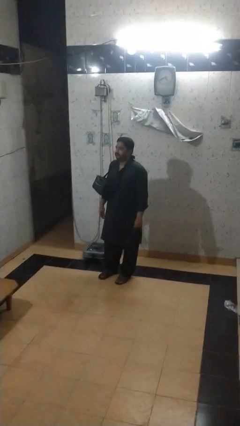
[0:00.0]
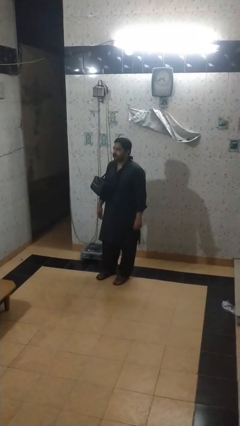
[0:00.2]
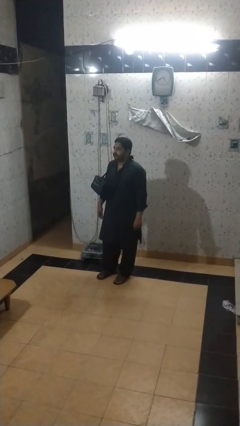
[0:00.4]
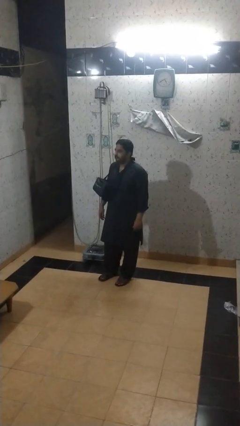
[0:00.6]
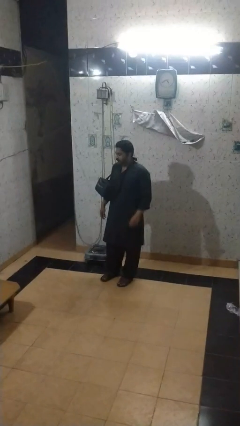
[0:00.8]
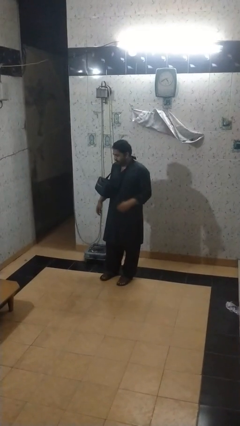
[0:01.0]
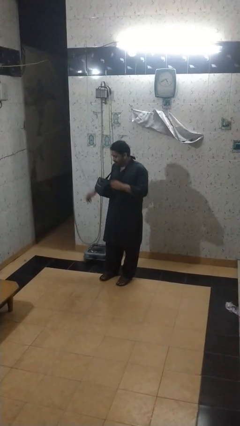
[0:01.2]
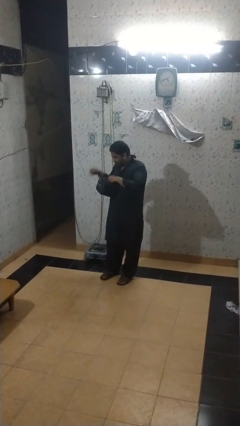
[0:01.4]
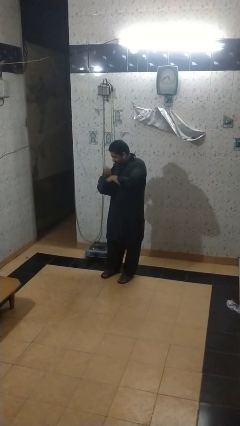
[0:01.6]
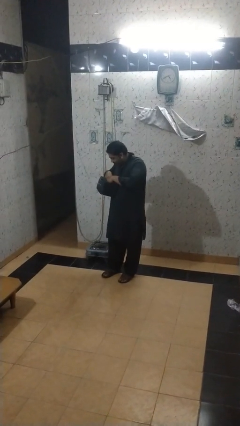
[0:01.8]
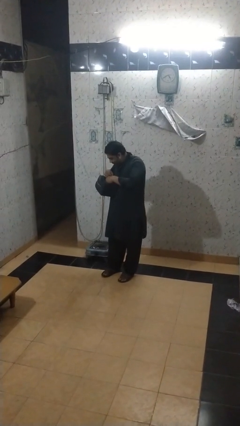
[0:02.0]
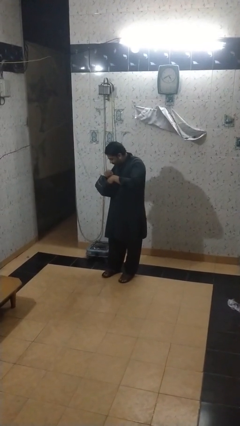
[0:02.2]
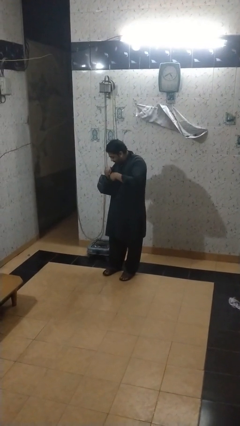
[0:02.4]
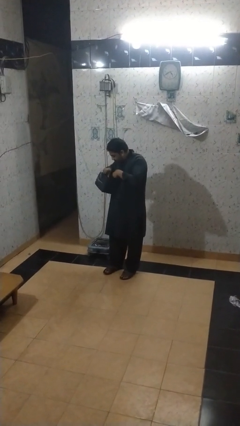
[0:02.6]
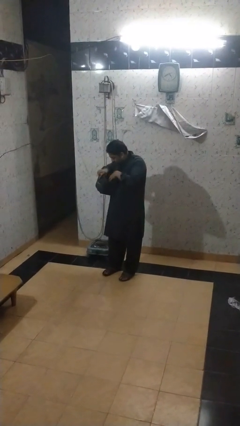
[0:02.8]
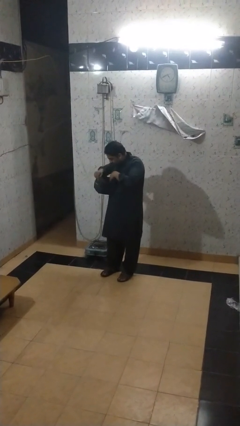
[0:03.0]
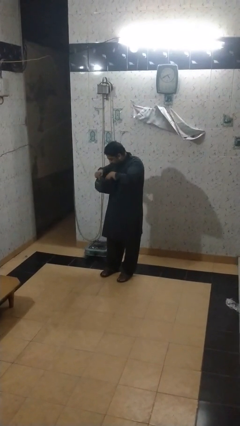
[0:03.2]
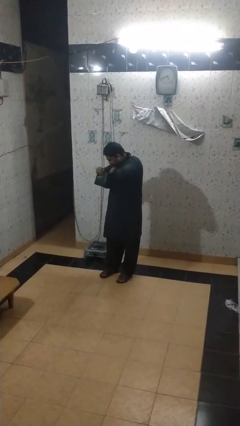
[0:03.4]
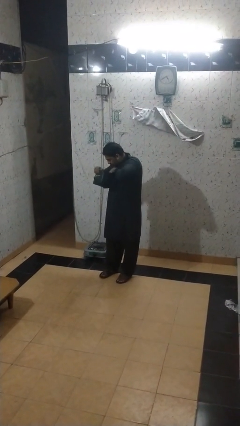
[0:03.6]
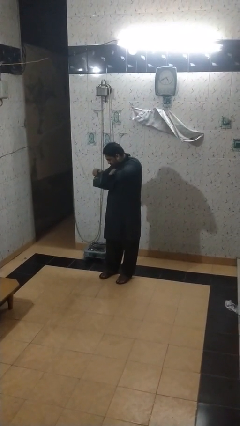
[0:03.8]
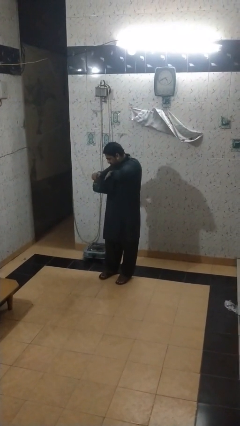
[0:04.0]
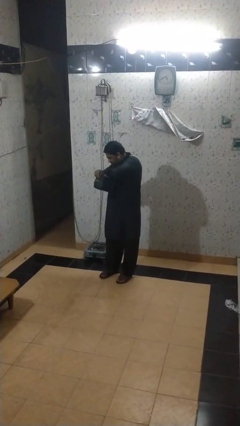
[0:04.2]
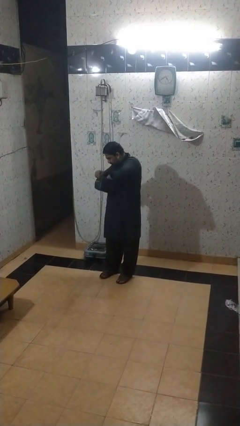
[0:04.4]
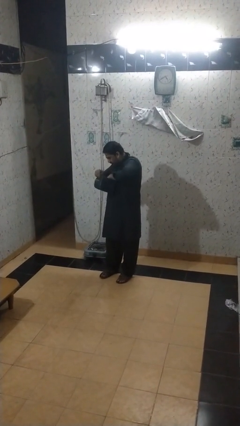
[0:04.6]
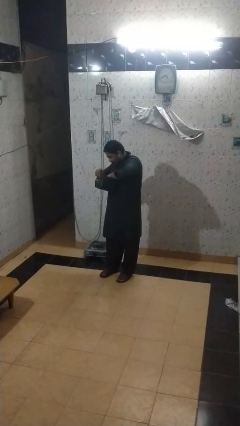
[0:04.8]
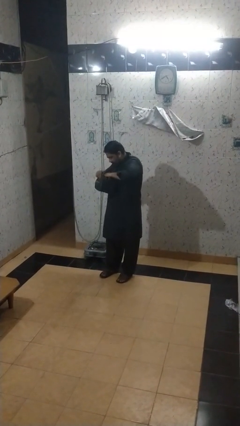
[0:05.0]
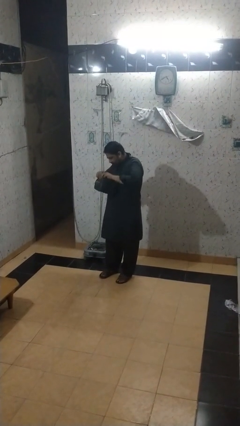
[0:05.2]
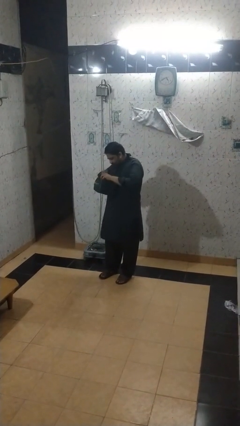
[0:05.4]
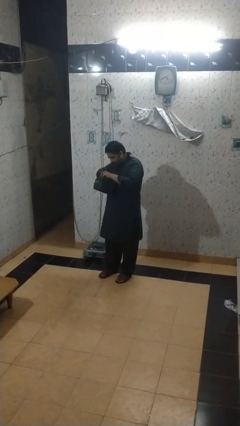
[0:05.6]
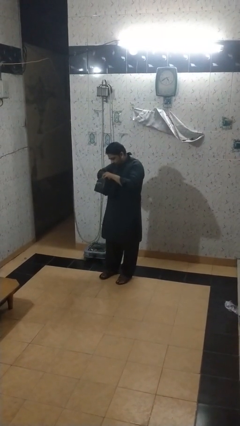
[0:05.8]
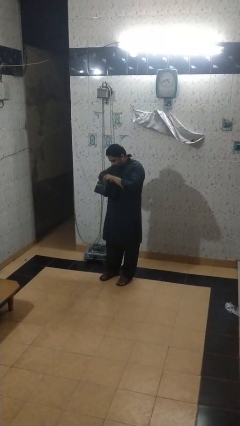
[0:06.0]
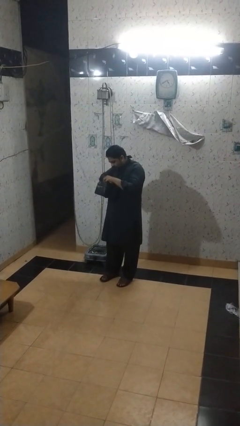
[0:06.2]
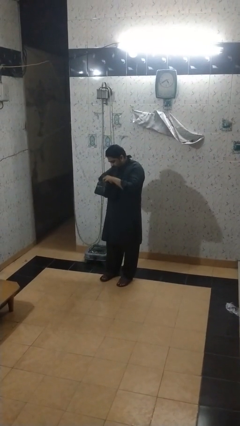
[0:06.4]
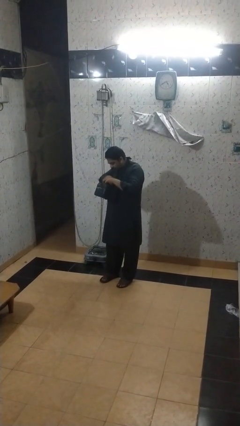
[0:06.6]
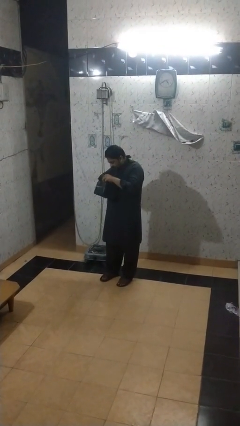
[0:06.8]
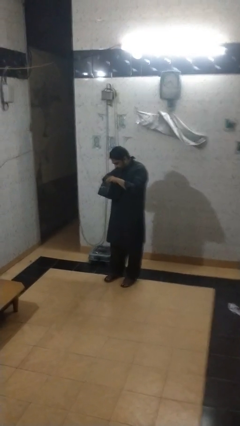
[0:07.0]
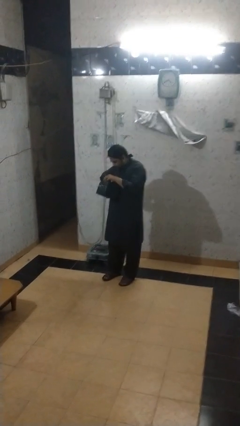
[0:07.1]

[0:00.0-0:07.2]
person searches in backpack

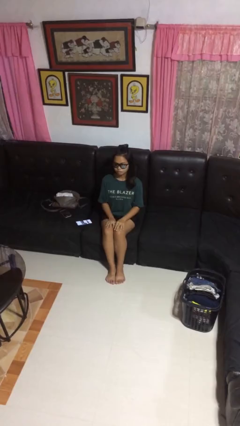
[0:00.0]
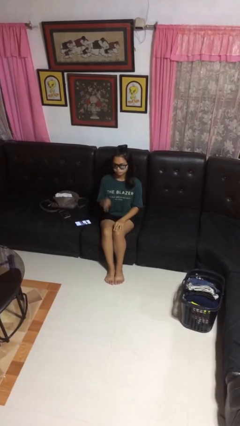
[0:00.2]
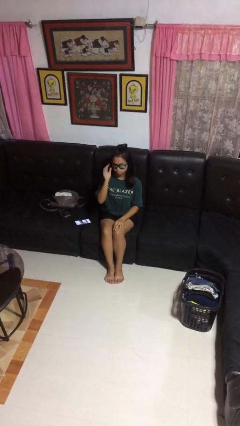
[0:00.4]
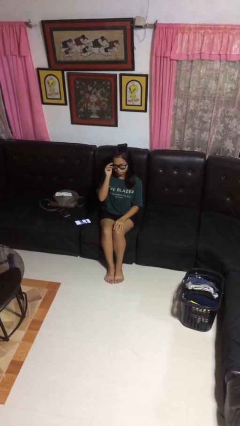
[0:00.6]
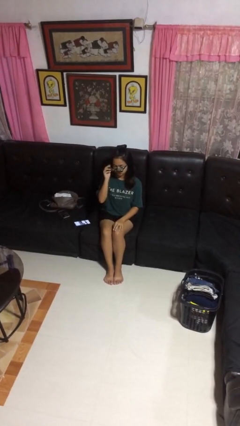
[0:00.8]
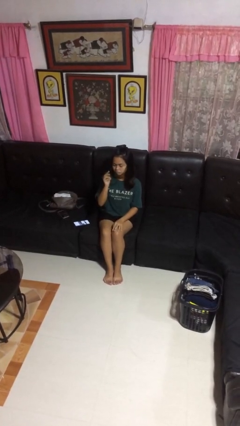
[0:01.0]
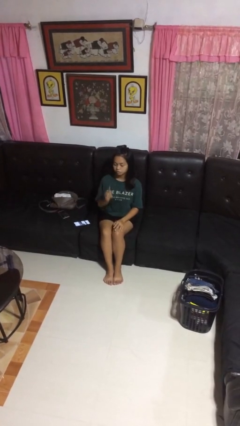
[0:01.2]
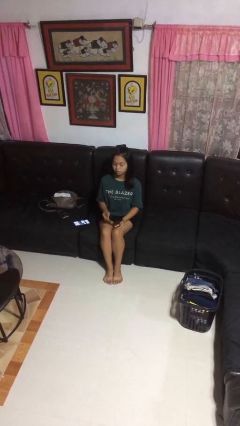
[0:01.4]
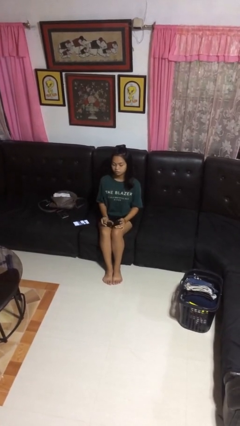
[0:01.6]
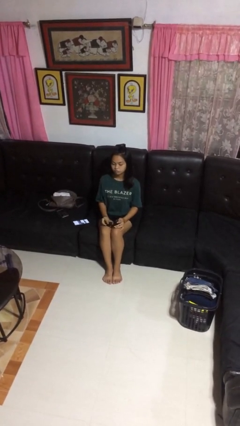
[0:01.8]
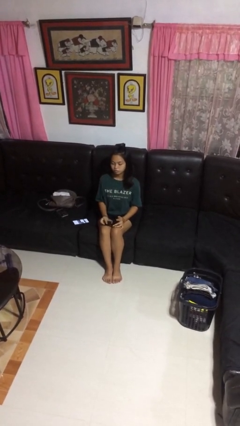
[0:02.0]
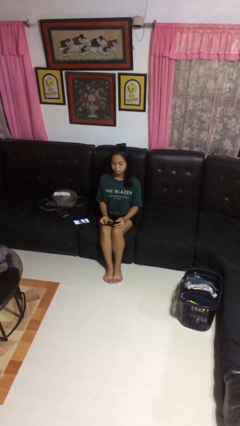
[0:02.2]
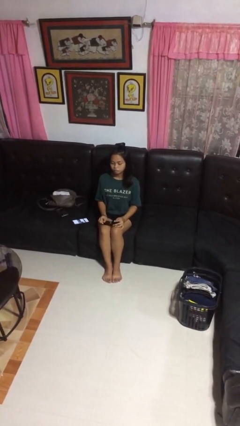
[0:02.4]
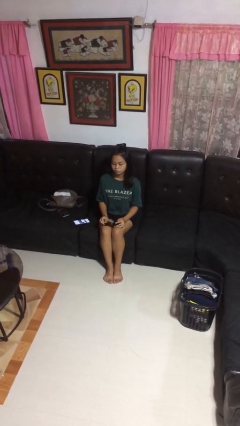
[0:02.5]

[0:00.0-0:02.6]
person takes off sunglasses

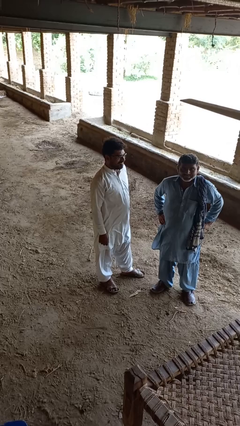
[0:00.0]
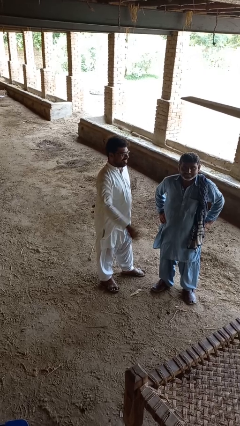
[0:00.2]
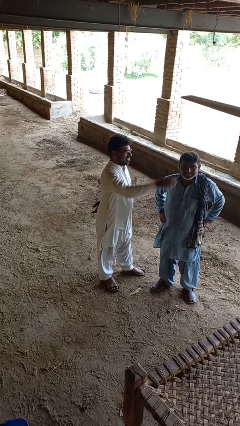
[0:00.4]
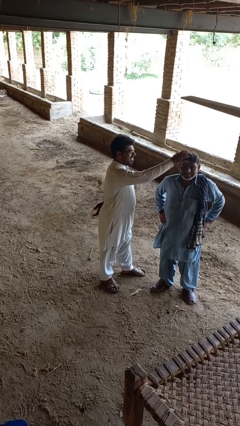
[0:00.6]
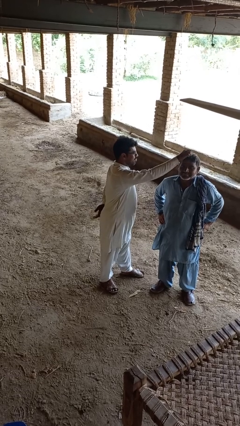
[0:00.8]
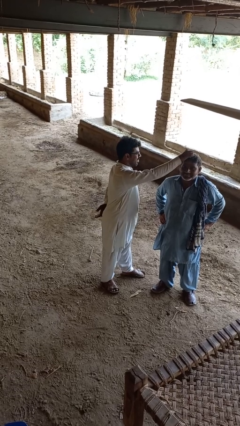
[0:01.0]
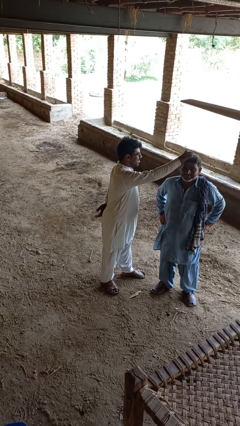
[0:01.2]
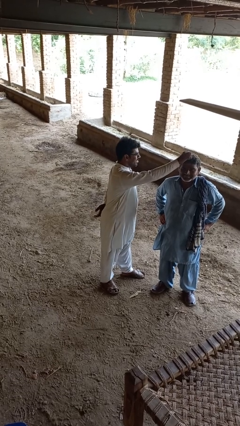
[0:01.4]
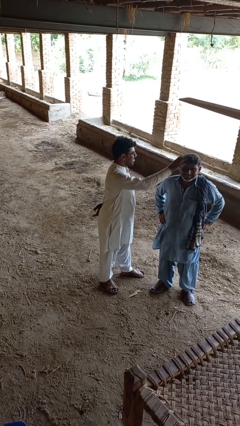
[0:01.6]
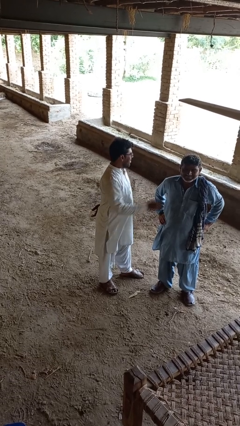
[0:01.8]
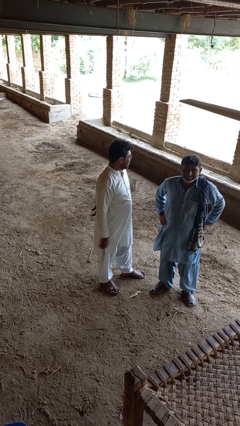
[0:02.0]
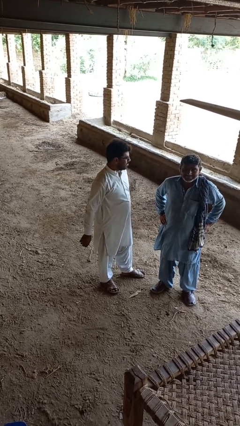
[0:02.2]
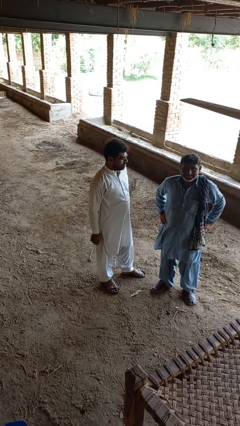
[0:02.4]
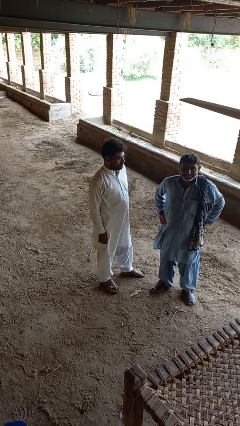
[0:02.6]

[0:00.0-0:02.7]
person grabs person by hair

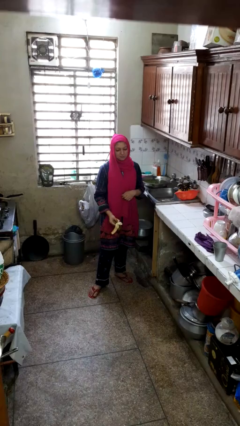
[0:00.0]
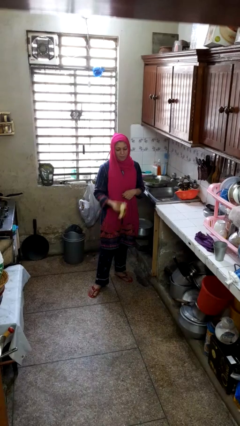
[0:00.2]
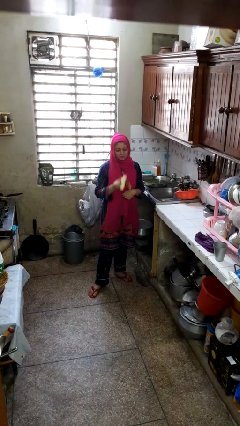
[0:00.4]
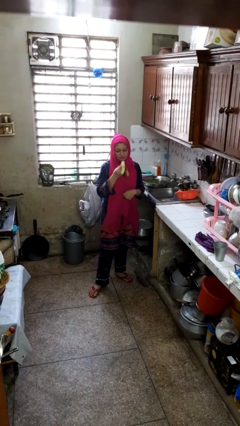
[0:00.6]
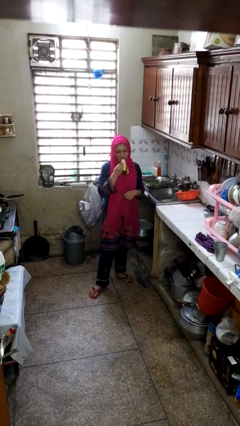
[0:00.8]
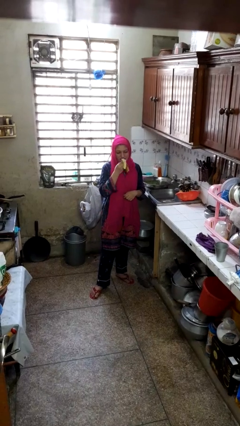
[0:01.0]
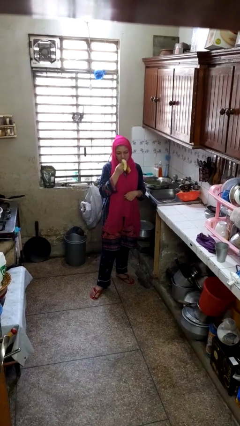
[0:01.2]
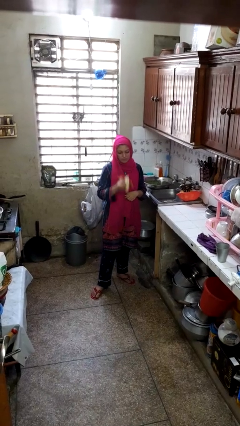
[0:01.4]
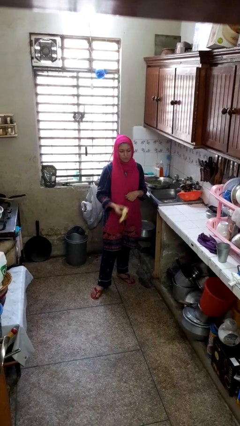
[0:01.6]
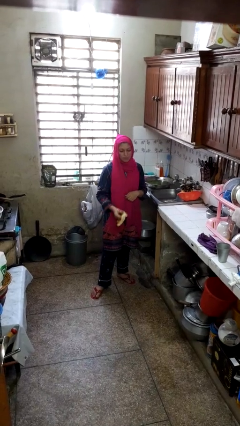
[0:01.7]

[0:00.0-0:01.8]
person eats banana

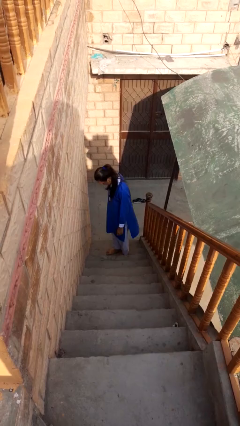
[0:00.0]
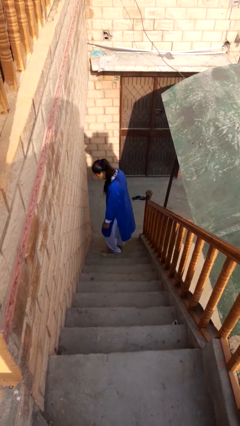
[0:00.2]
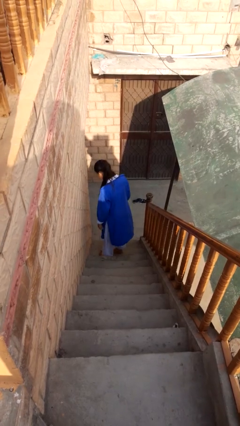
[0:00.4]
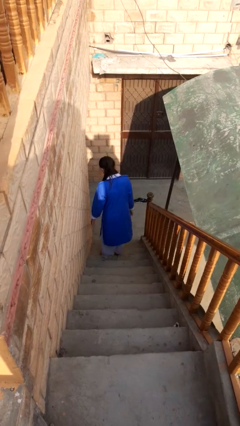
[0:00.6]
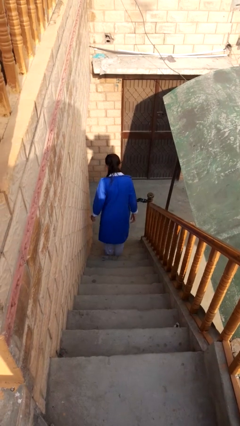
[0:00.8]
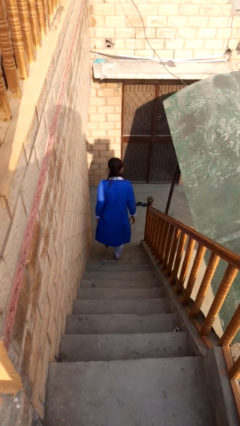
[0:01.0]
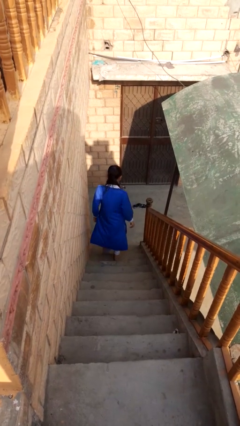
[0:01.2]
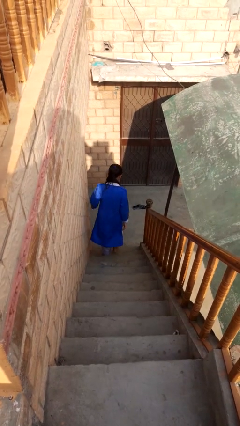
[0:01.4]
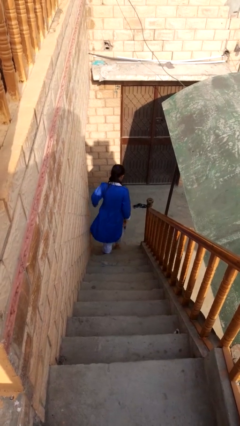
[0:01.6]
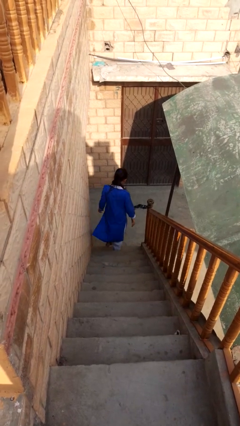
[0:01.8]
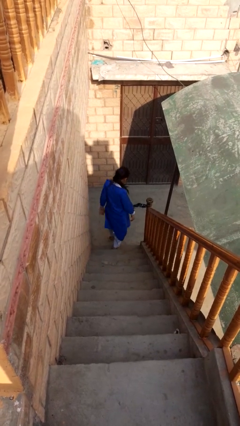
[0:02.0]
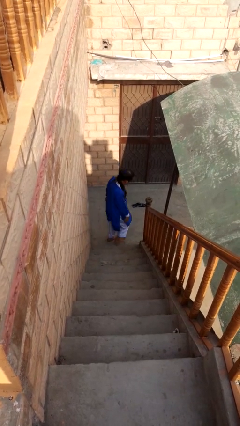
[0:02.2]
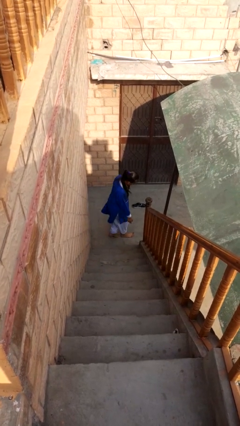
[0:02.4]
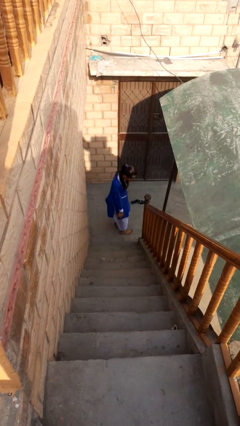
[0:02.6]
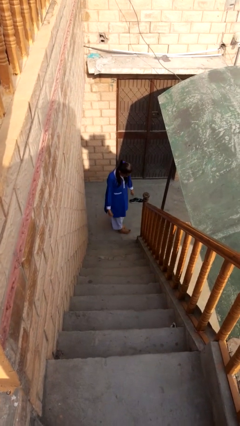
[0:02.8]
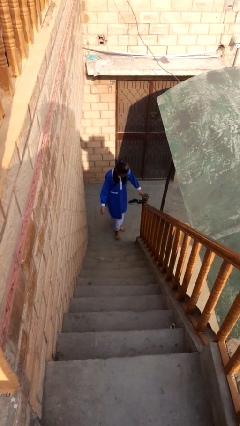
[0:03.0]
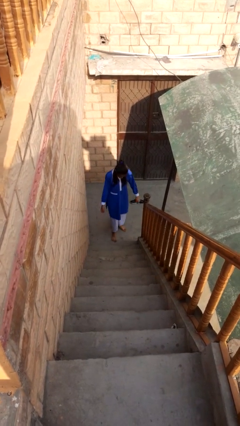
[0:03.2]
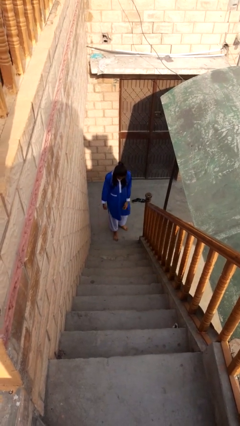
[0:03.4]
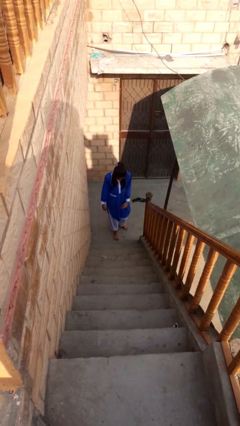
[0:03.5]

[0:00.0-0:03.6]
person climbs down stairs
